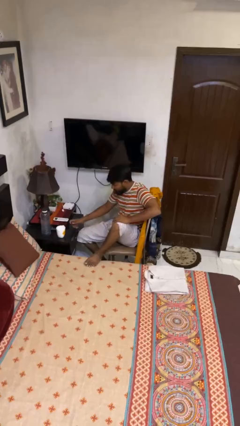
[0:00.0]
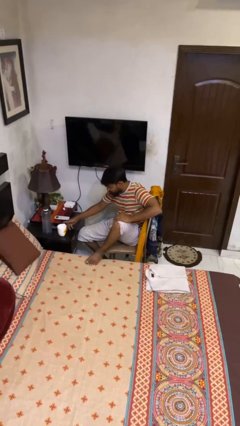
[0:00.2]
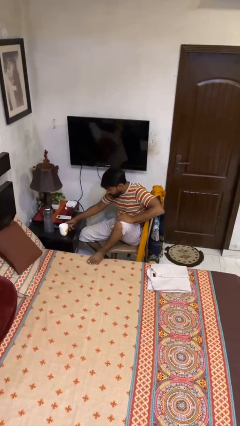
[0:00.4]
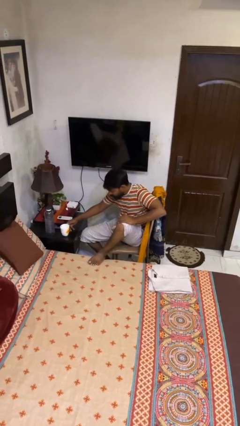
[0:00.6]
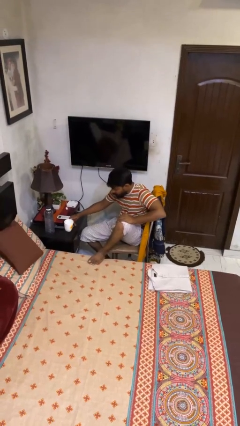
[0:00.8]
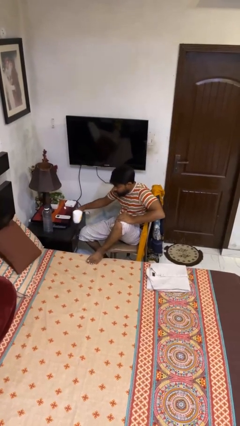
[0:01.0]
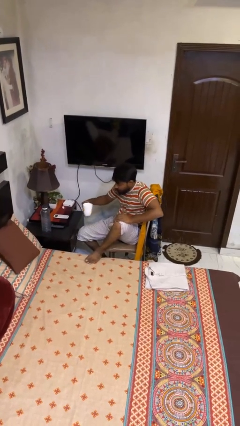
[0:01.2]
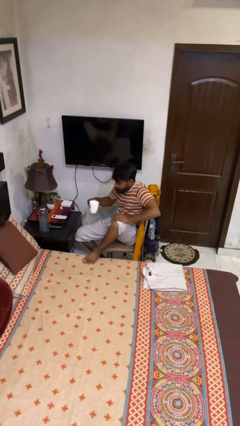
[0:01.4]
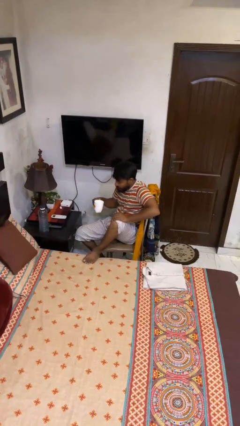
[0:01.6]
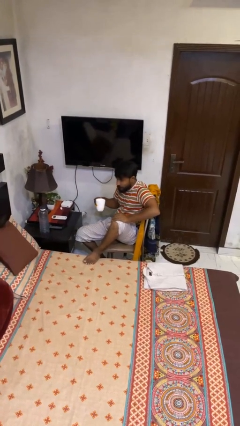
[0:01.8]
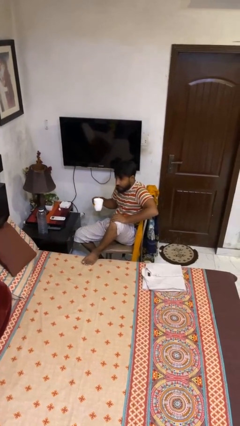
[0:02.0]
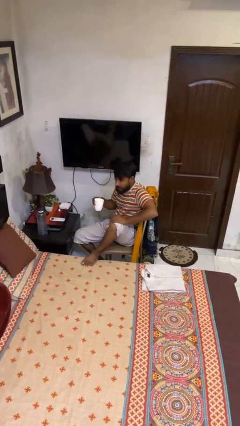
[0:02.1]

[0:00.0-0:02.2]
person picks up object from table

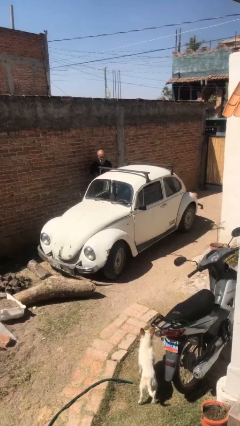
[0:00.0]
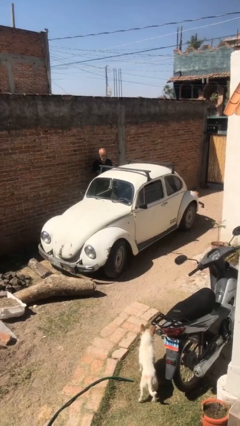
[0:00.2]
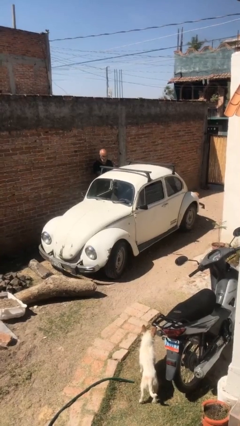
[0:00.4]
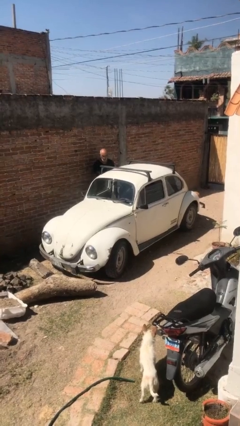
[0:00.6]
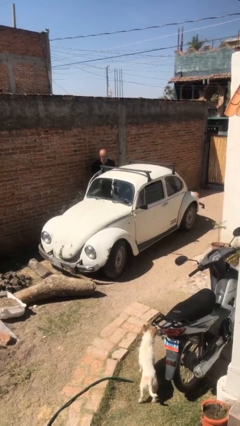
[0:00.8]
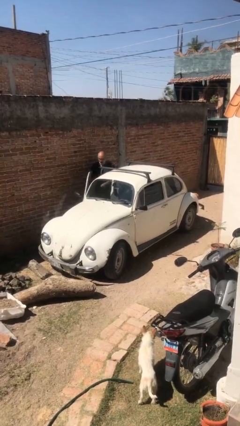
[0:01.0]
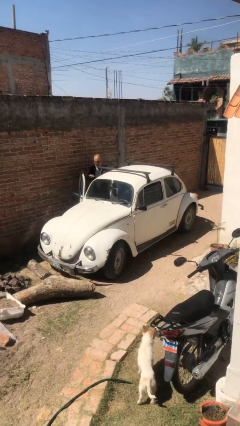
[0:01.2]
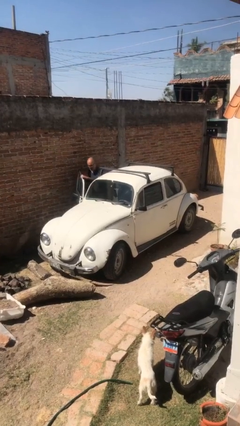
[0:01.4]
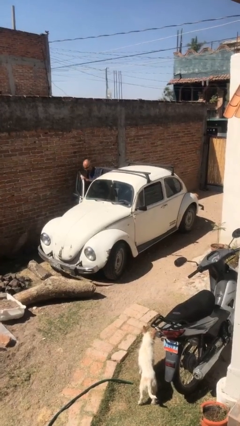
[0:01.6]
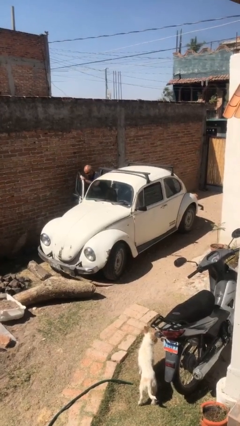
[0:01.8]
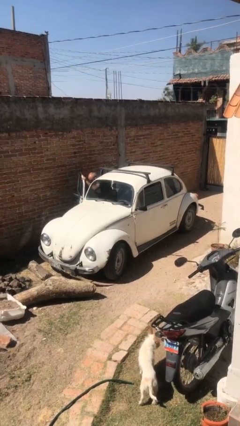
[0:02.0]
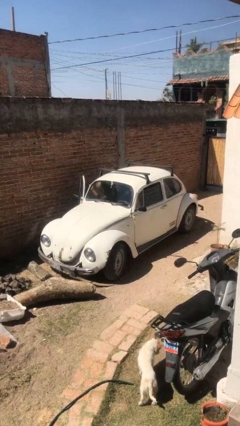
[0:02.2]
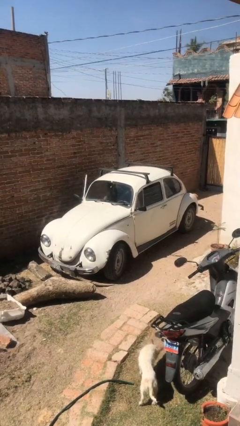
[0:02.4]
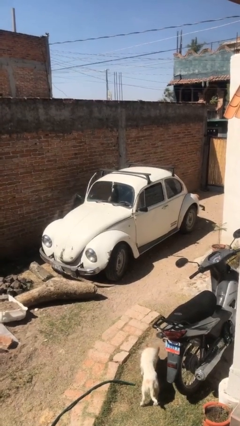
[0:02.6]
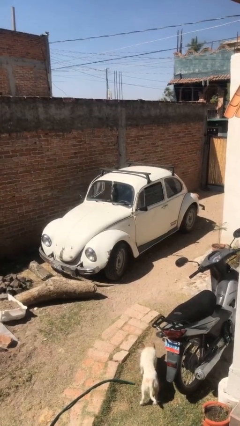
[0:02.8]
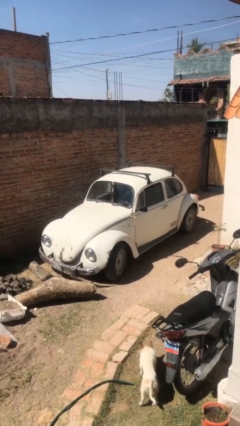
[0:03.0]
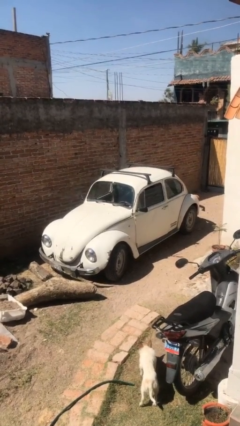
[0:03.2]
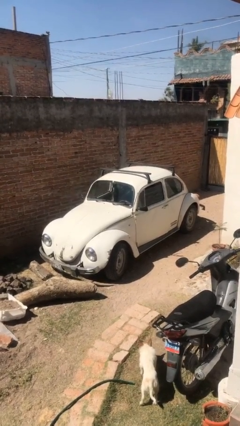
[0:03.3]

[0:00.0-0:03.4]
car picks up person

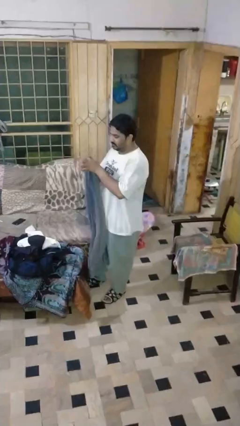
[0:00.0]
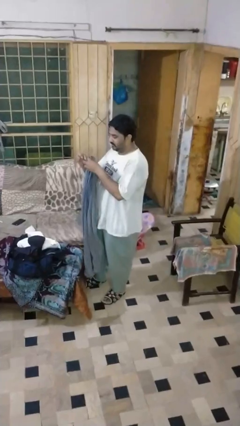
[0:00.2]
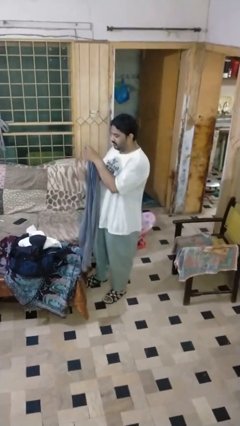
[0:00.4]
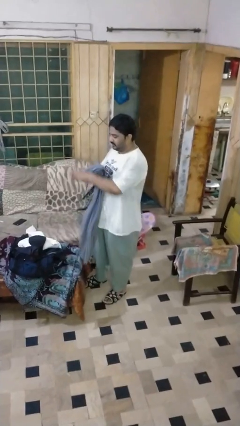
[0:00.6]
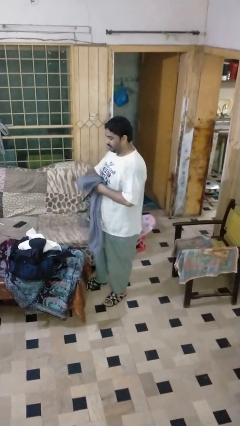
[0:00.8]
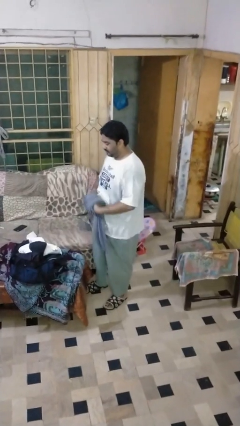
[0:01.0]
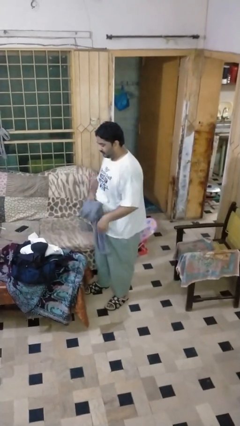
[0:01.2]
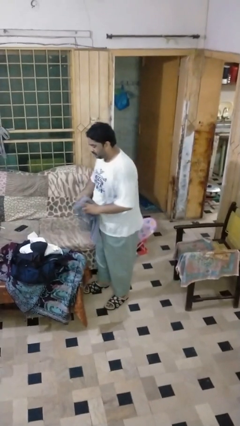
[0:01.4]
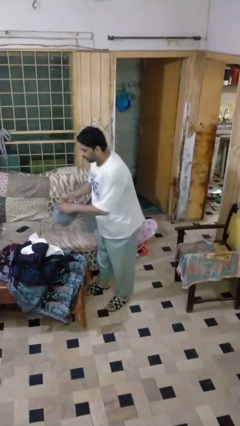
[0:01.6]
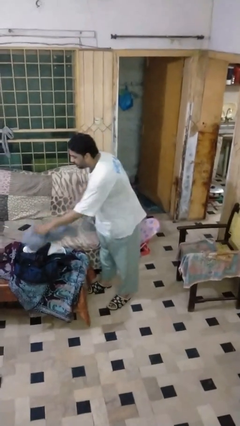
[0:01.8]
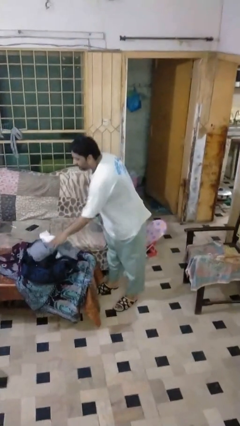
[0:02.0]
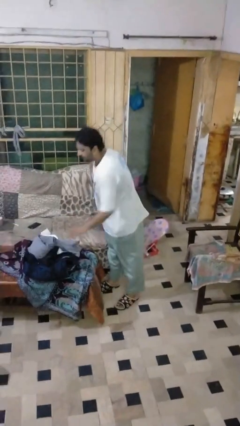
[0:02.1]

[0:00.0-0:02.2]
person folds pants

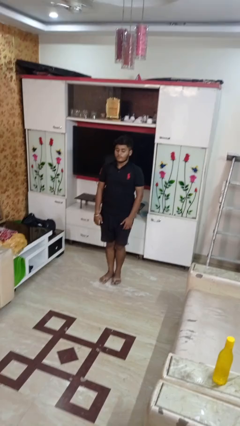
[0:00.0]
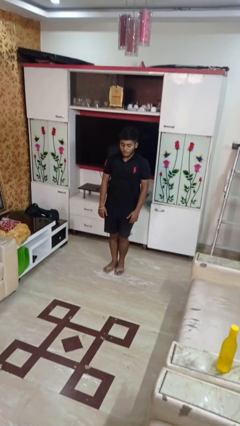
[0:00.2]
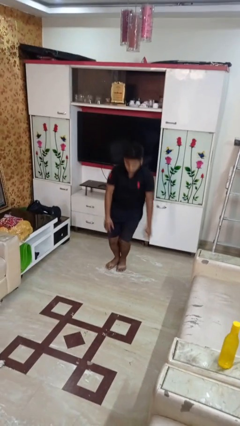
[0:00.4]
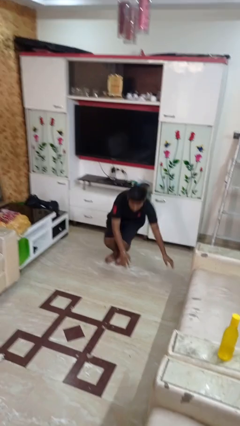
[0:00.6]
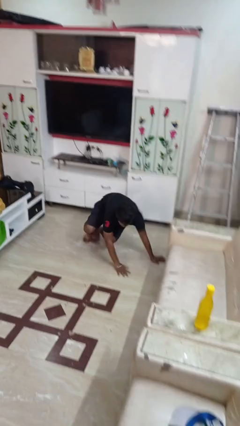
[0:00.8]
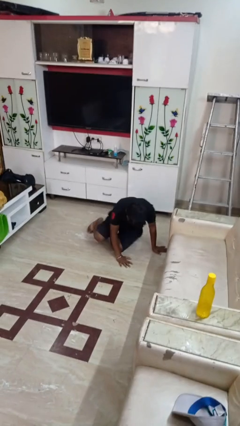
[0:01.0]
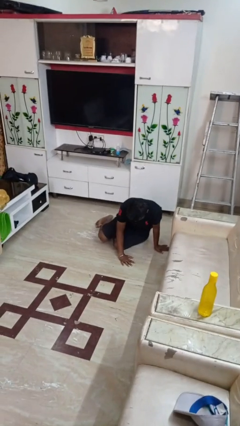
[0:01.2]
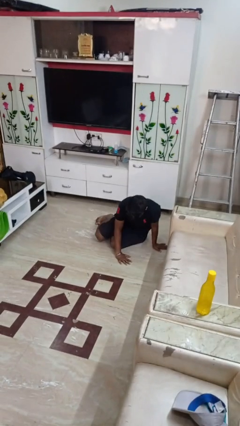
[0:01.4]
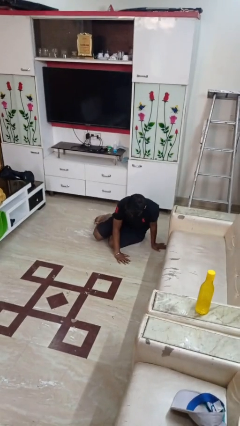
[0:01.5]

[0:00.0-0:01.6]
person falls while standing

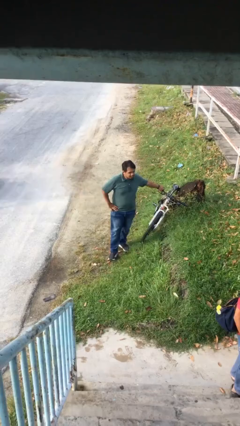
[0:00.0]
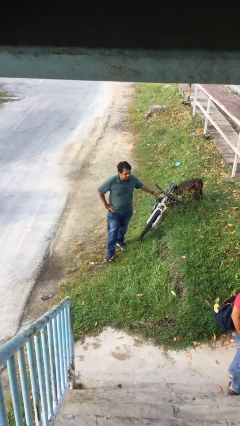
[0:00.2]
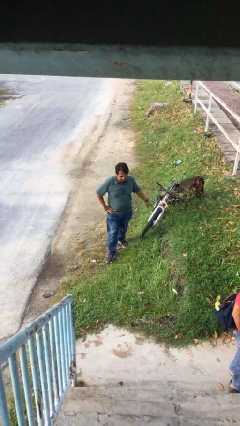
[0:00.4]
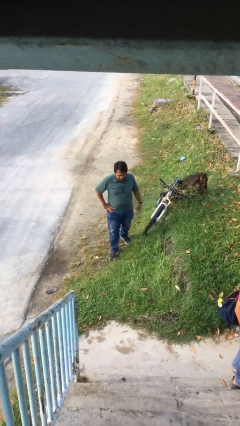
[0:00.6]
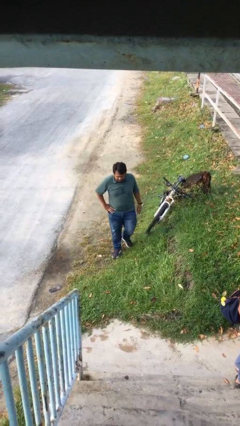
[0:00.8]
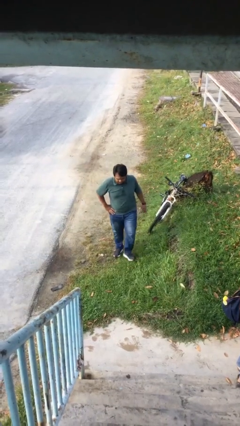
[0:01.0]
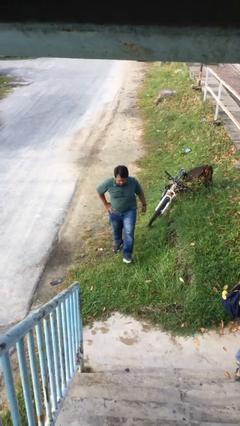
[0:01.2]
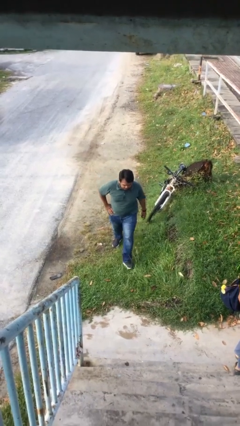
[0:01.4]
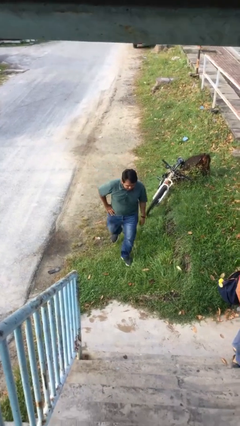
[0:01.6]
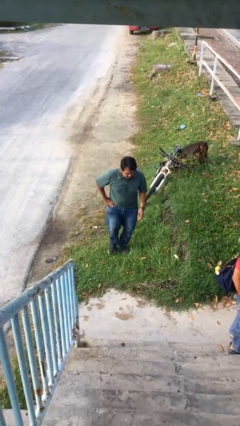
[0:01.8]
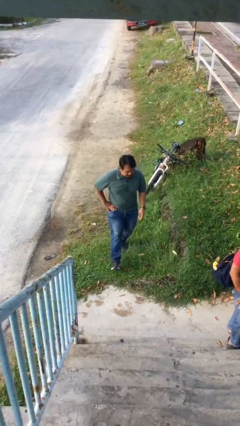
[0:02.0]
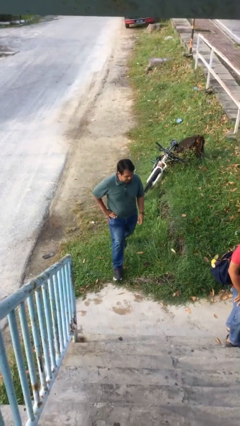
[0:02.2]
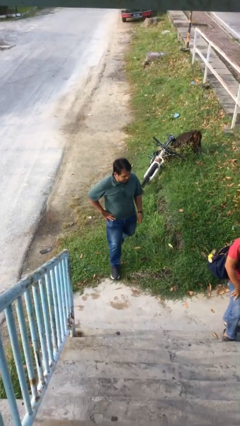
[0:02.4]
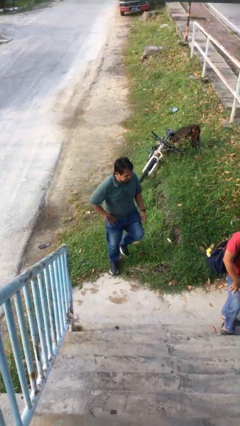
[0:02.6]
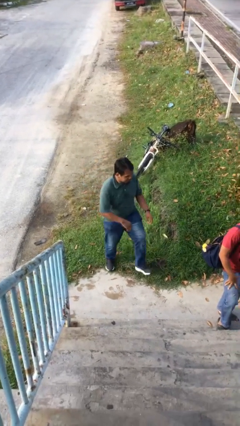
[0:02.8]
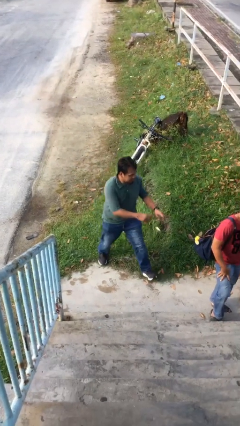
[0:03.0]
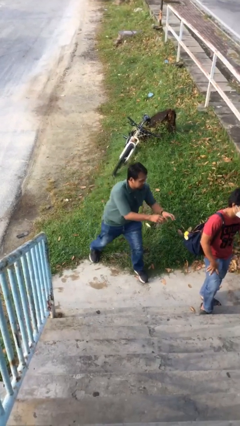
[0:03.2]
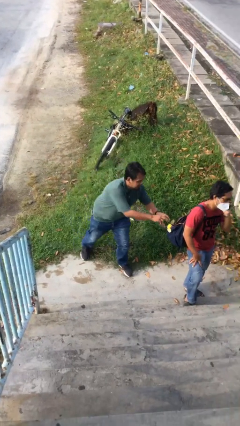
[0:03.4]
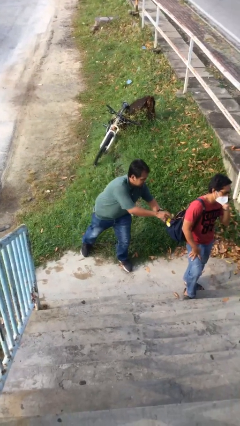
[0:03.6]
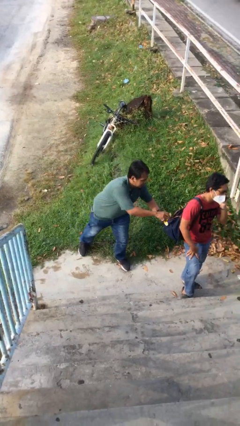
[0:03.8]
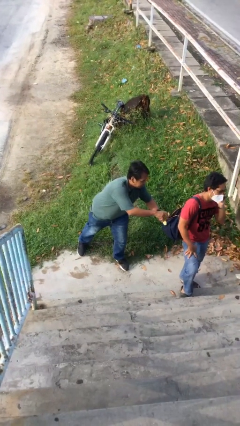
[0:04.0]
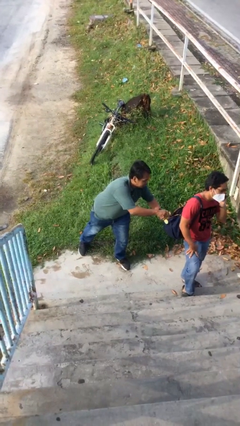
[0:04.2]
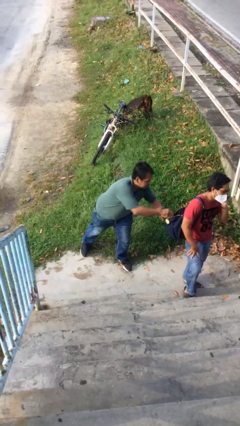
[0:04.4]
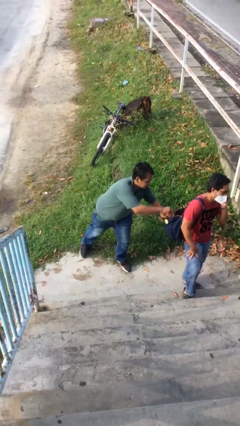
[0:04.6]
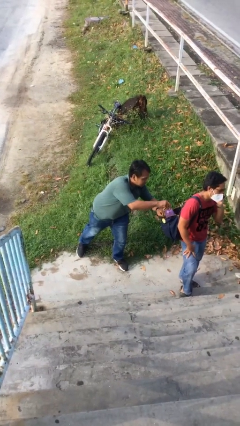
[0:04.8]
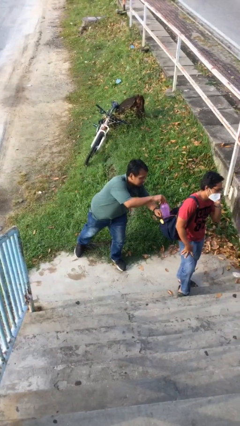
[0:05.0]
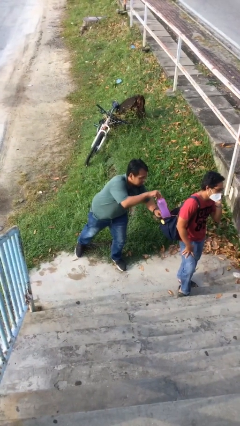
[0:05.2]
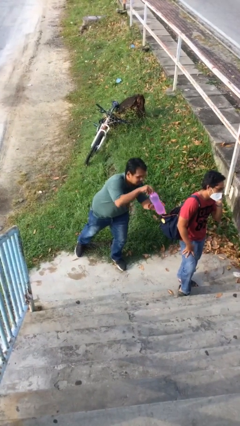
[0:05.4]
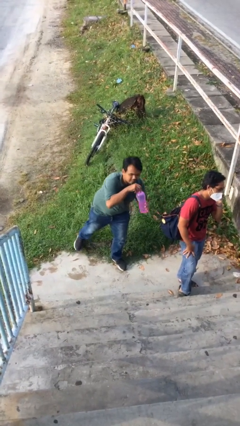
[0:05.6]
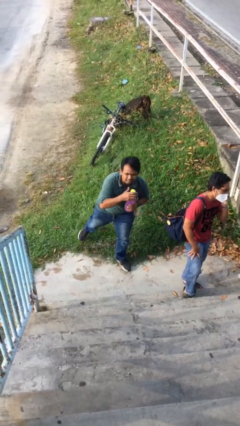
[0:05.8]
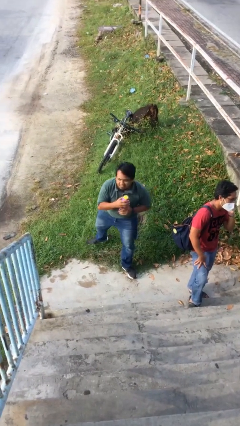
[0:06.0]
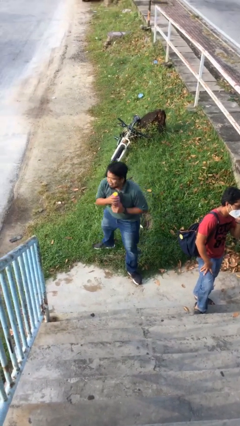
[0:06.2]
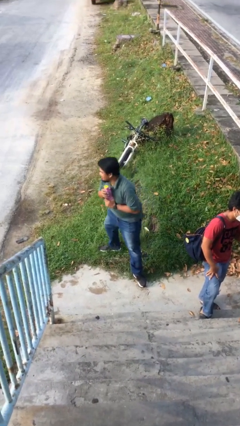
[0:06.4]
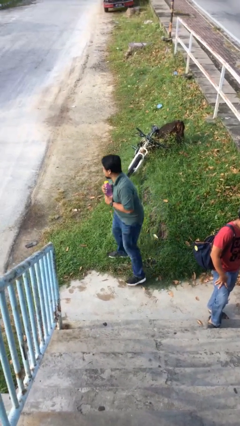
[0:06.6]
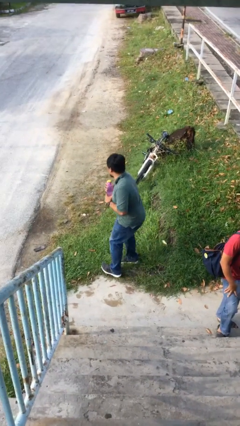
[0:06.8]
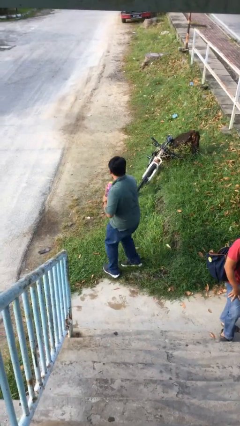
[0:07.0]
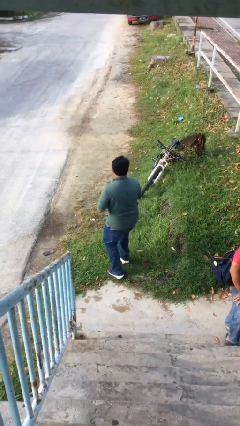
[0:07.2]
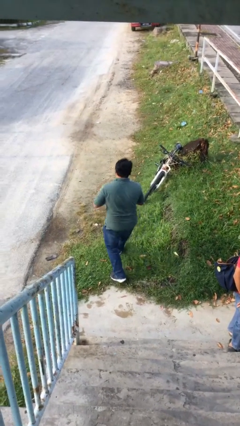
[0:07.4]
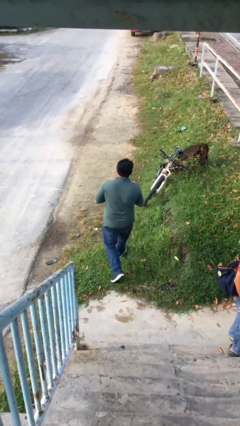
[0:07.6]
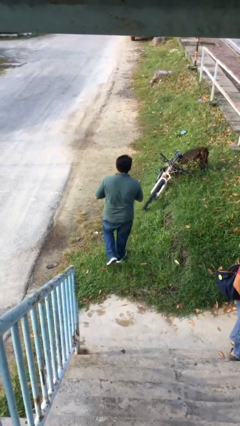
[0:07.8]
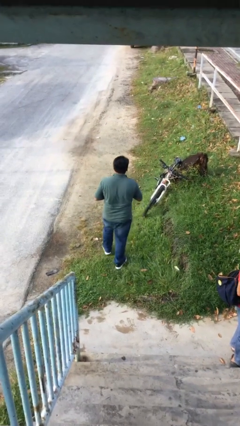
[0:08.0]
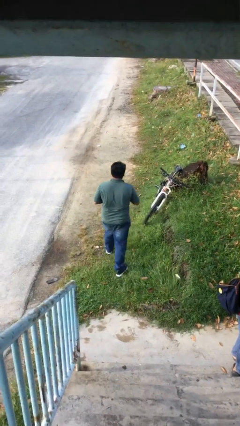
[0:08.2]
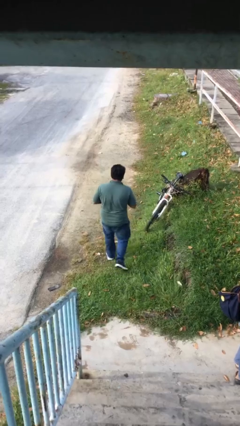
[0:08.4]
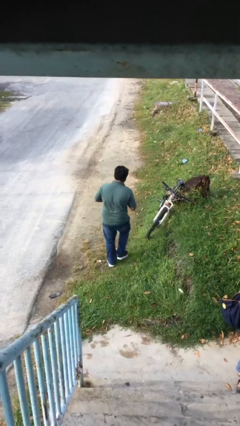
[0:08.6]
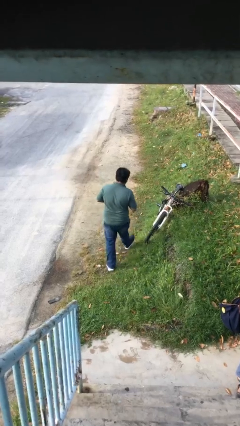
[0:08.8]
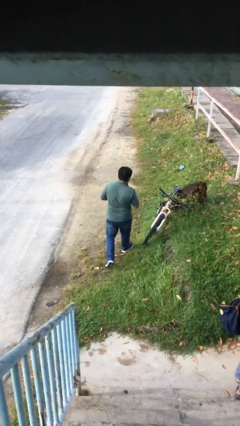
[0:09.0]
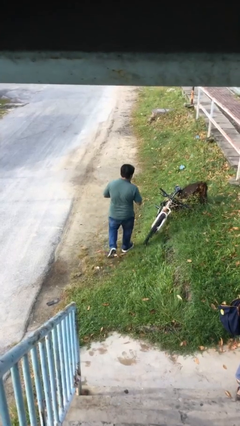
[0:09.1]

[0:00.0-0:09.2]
person steals object from person
